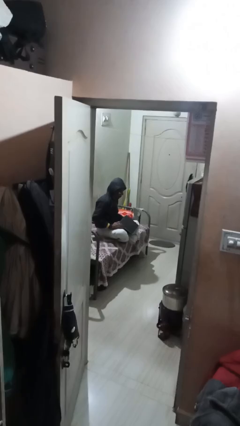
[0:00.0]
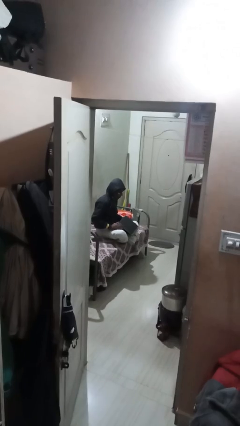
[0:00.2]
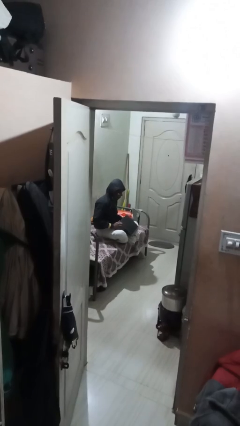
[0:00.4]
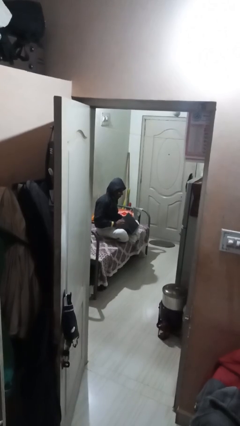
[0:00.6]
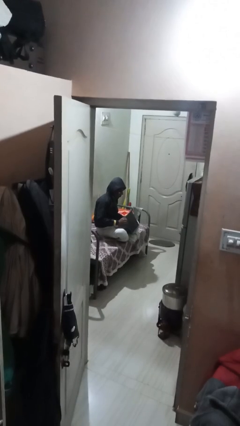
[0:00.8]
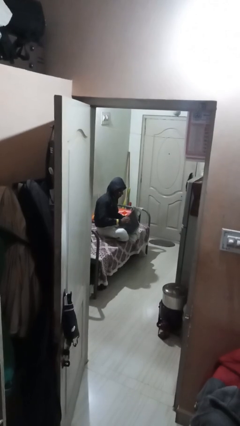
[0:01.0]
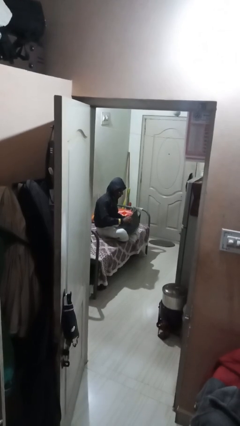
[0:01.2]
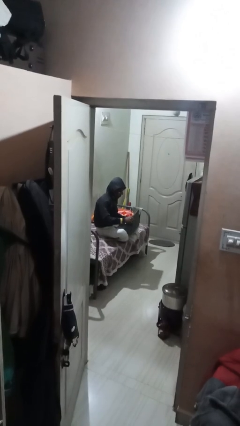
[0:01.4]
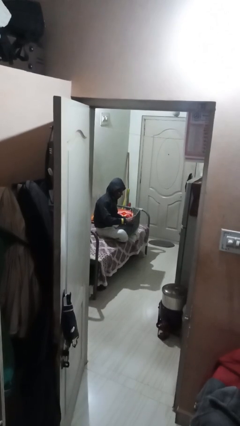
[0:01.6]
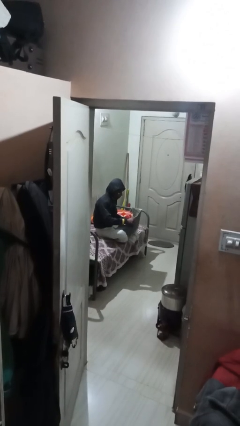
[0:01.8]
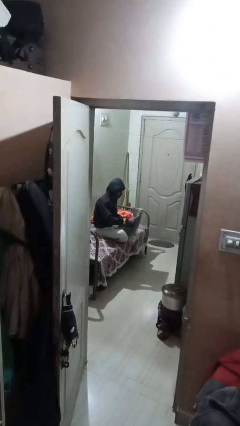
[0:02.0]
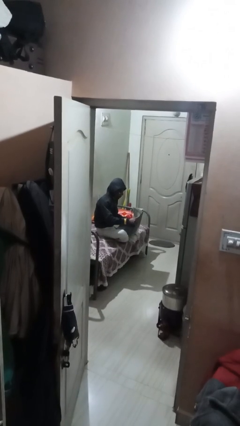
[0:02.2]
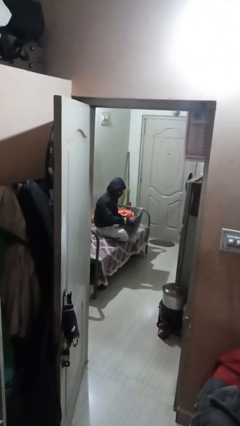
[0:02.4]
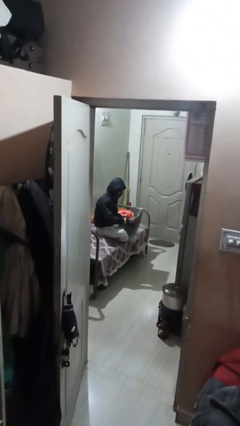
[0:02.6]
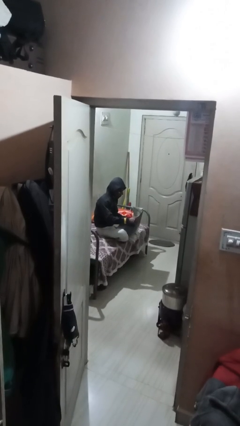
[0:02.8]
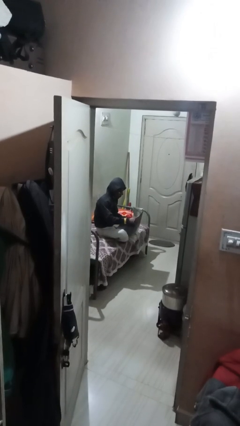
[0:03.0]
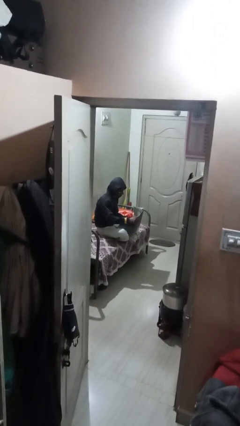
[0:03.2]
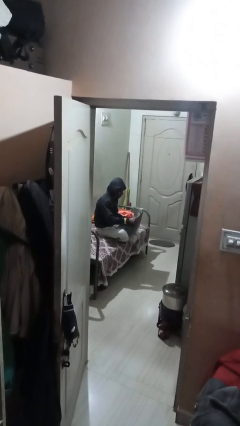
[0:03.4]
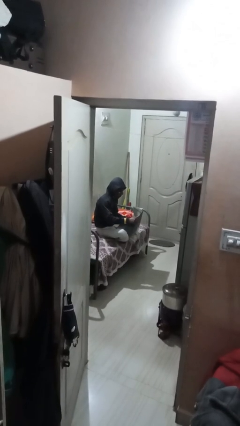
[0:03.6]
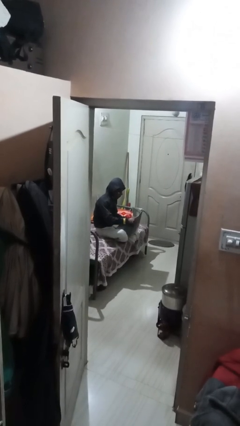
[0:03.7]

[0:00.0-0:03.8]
person interacts with laptop

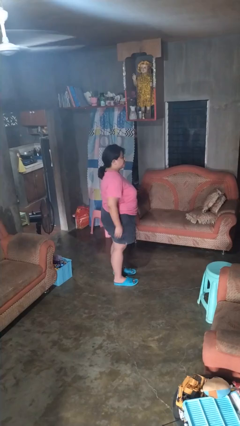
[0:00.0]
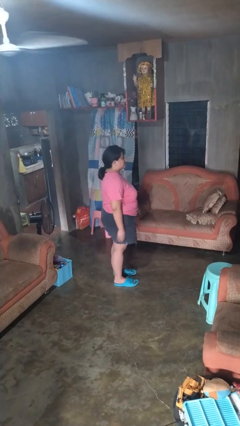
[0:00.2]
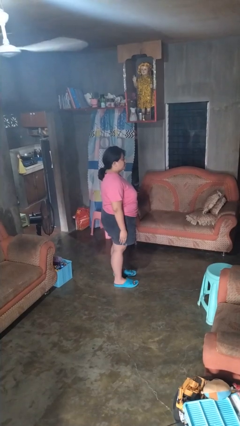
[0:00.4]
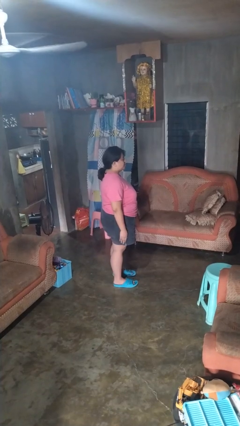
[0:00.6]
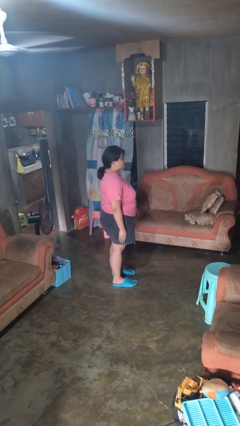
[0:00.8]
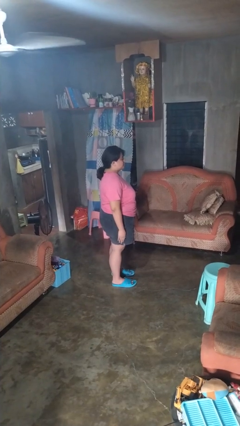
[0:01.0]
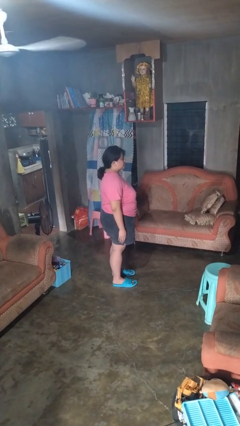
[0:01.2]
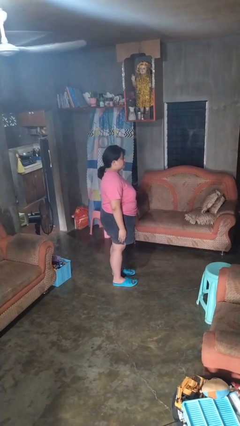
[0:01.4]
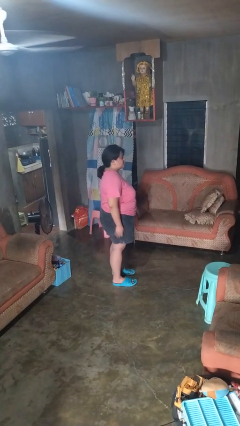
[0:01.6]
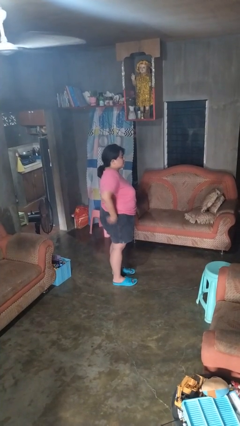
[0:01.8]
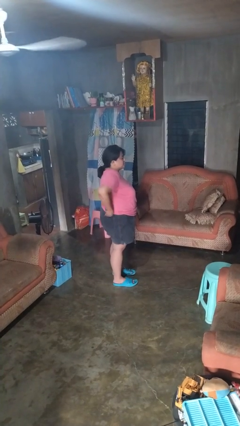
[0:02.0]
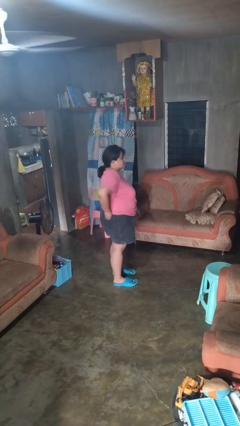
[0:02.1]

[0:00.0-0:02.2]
person puts hands in back pockets

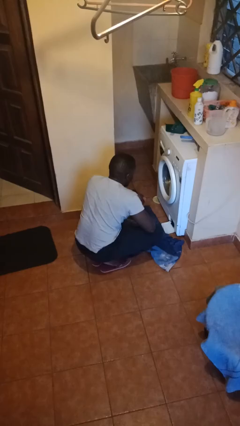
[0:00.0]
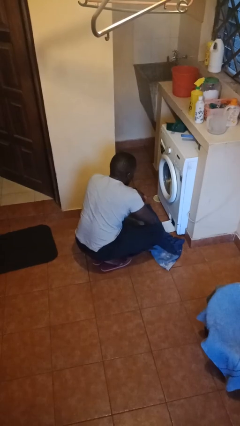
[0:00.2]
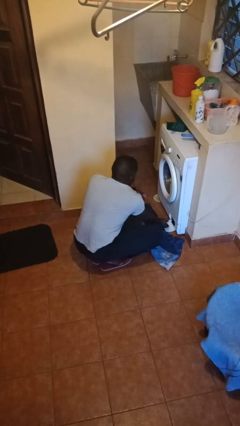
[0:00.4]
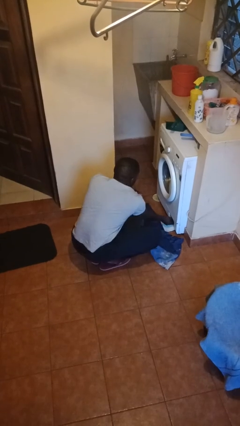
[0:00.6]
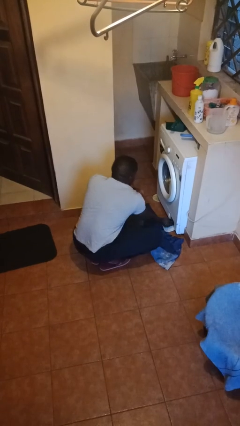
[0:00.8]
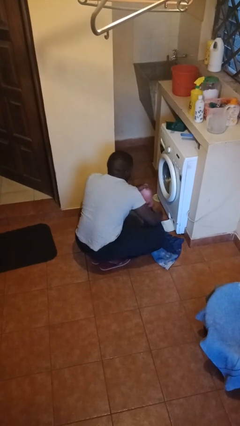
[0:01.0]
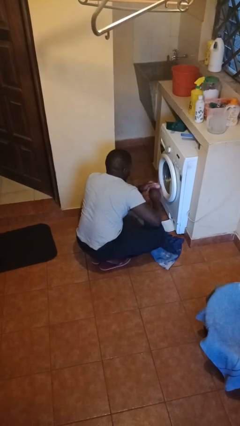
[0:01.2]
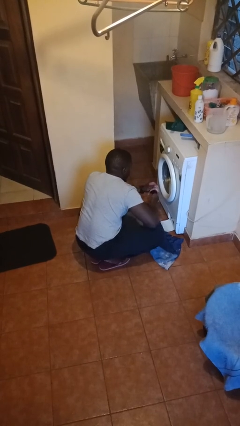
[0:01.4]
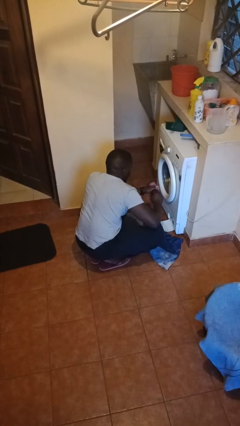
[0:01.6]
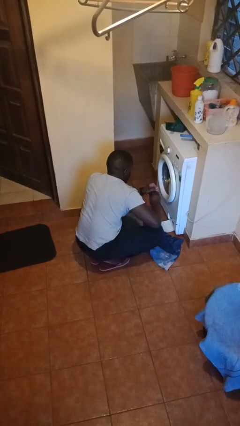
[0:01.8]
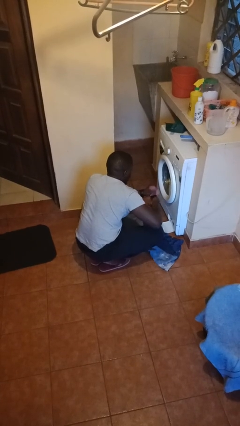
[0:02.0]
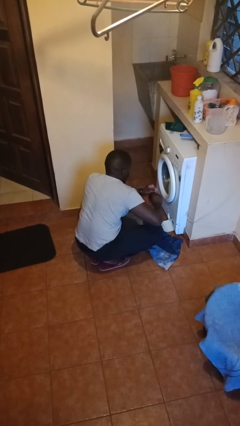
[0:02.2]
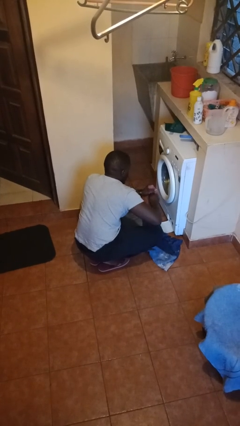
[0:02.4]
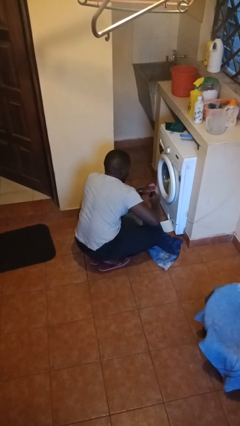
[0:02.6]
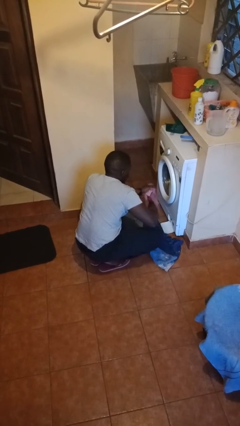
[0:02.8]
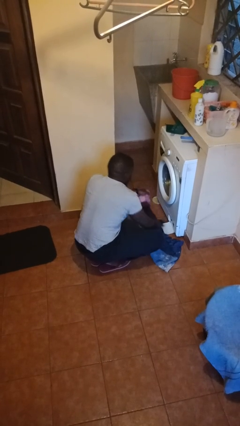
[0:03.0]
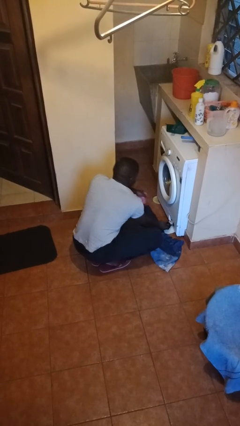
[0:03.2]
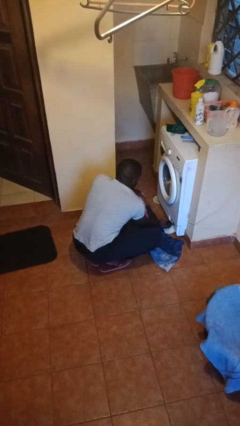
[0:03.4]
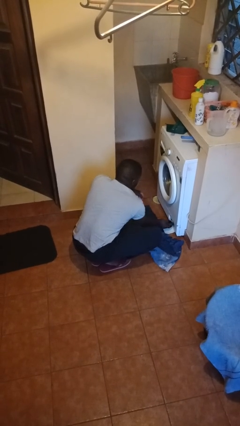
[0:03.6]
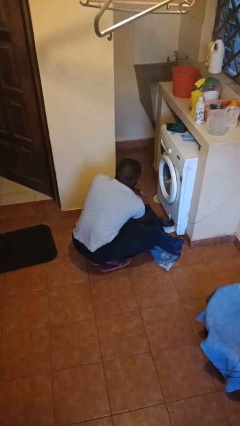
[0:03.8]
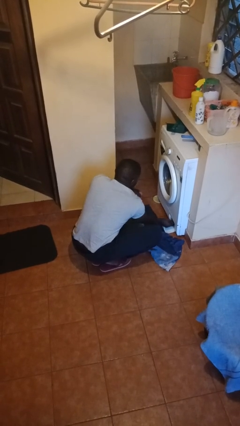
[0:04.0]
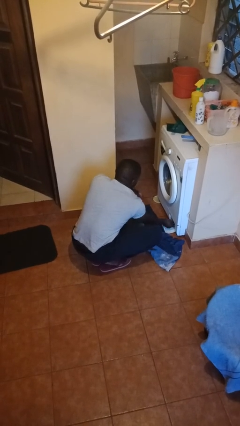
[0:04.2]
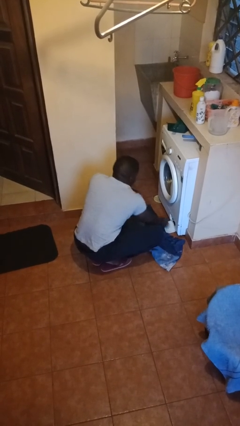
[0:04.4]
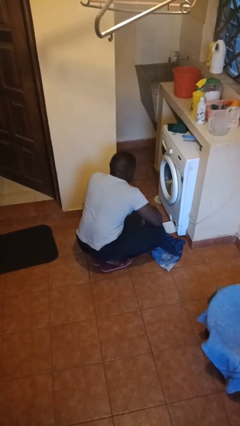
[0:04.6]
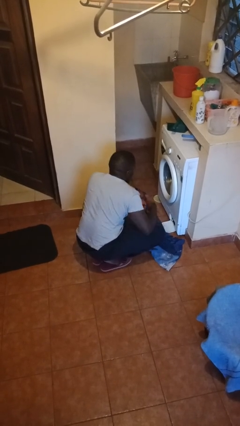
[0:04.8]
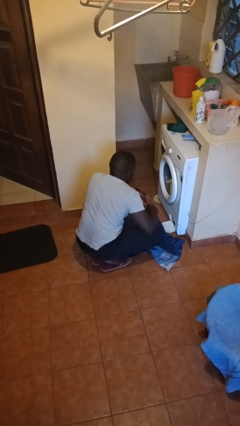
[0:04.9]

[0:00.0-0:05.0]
person cleans dryer lint trap

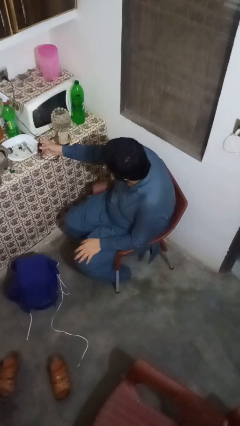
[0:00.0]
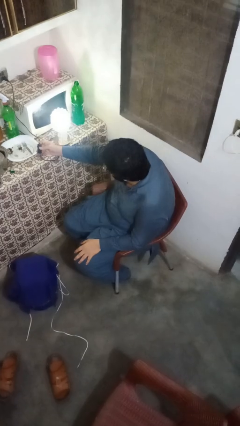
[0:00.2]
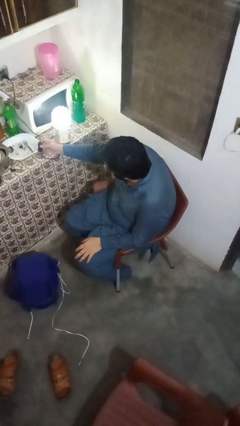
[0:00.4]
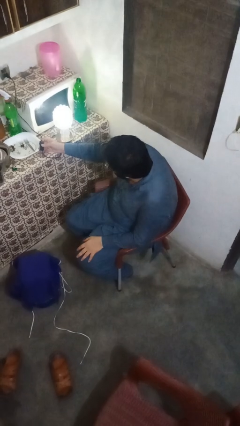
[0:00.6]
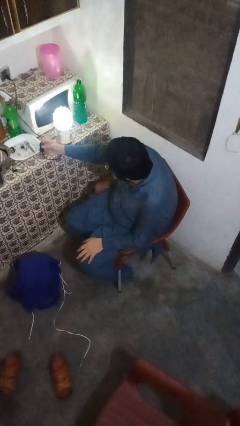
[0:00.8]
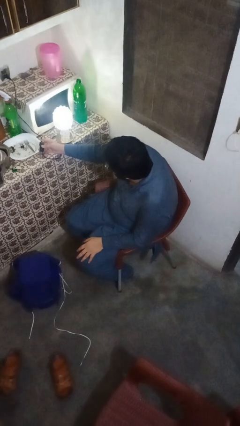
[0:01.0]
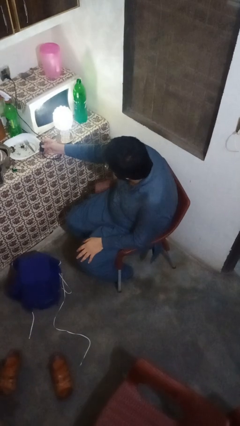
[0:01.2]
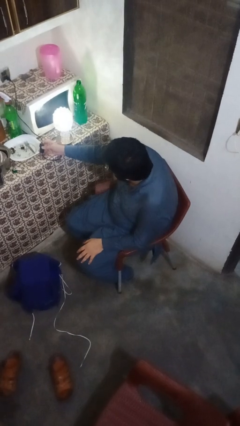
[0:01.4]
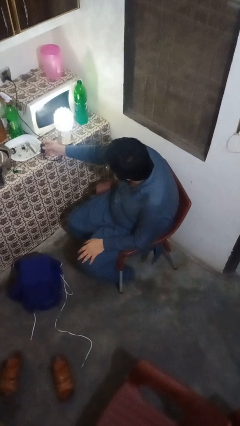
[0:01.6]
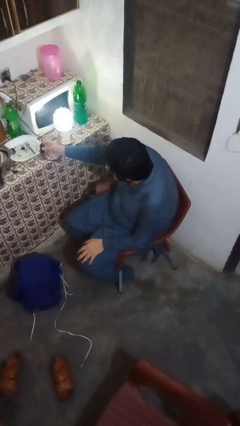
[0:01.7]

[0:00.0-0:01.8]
person turns on lamp

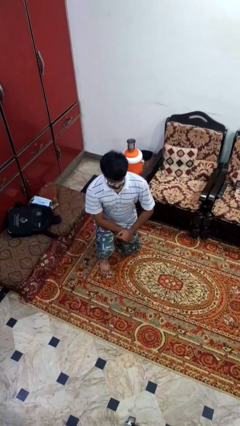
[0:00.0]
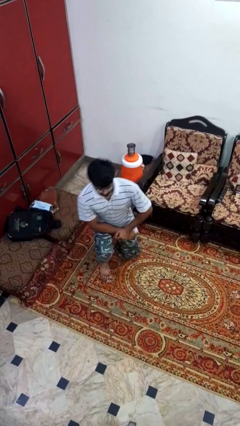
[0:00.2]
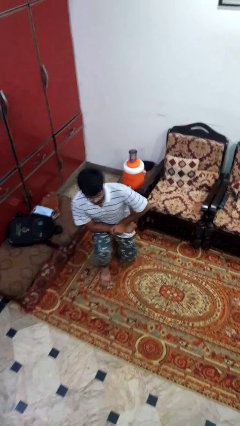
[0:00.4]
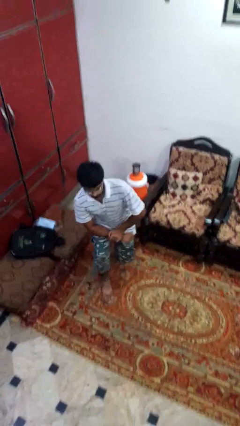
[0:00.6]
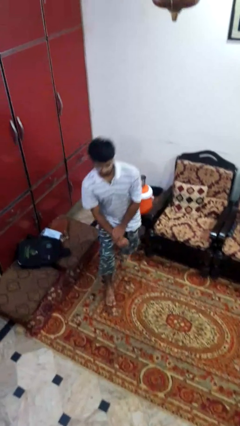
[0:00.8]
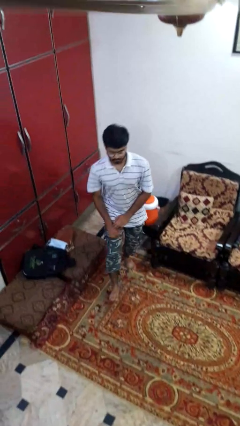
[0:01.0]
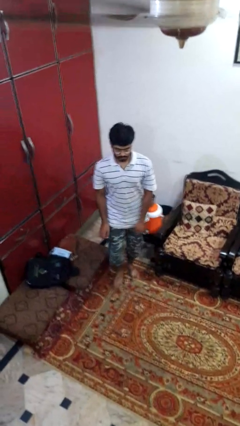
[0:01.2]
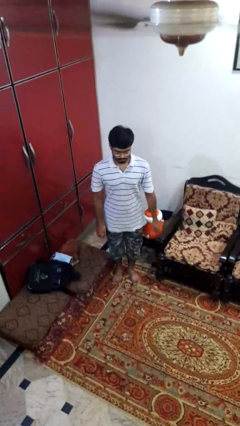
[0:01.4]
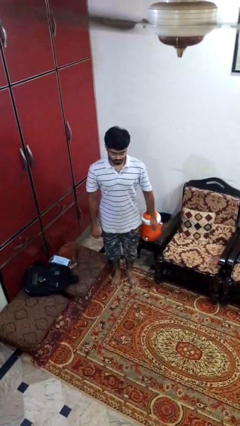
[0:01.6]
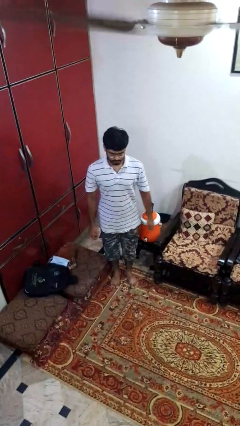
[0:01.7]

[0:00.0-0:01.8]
person stands up from floor

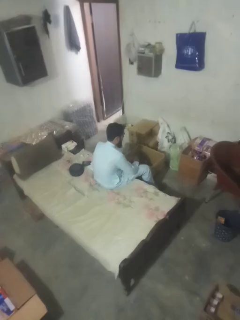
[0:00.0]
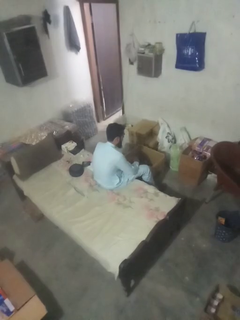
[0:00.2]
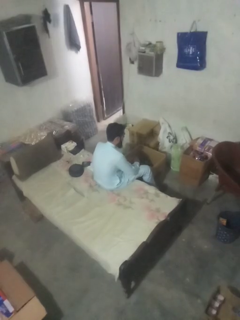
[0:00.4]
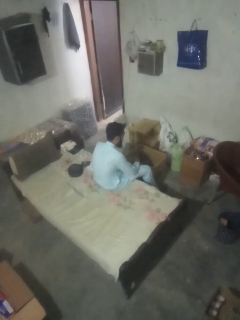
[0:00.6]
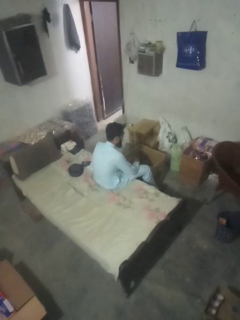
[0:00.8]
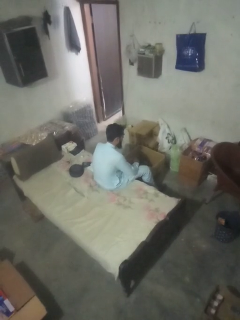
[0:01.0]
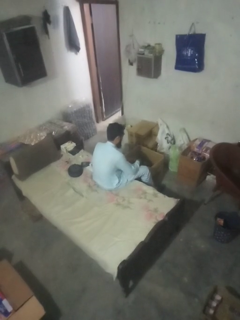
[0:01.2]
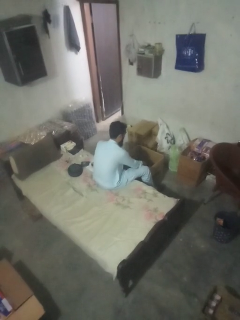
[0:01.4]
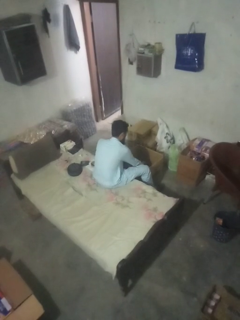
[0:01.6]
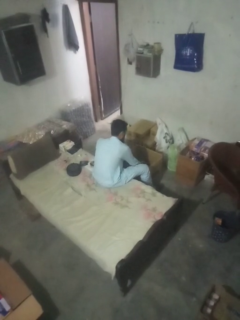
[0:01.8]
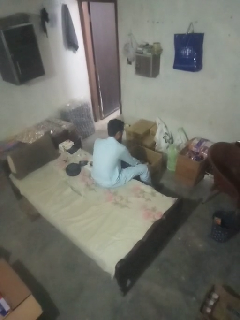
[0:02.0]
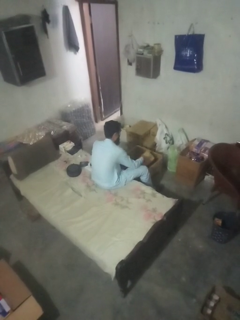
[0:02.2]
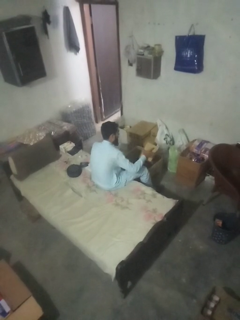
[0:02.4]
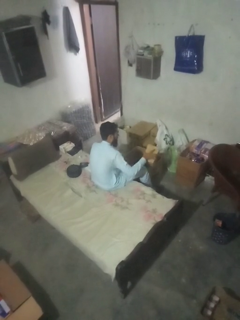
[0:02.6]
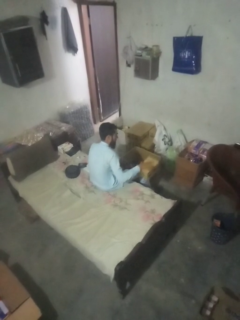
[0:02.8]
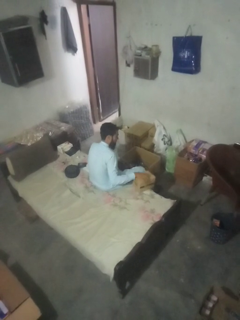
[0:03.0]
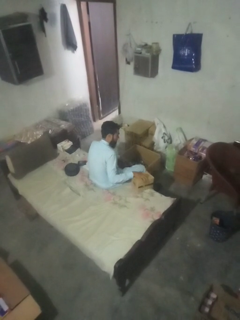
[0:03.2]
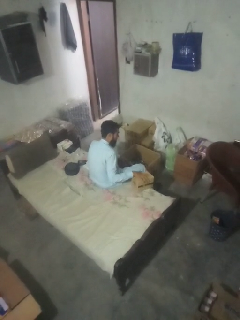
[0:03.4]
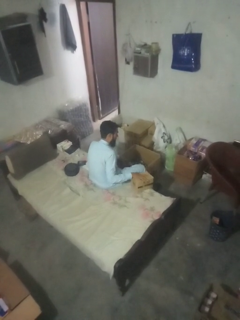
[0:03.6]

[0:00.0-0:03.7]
person takes object from box

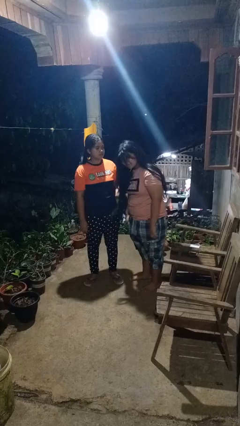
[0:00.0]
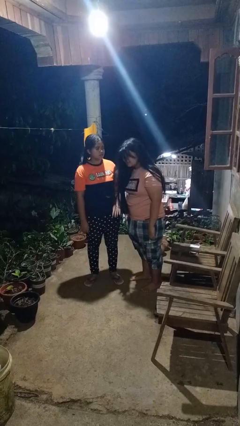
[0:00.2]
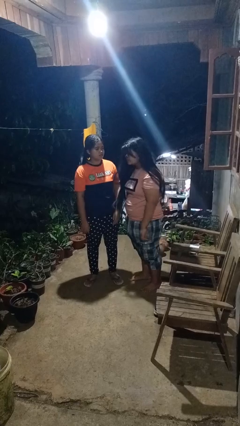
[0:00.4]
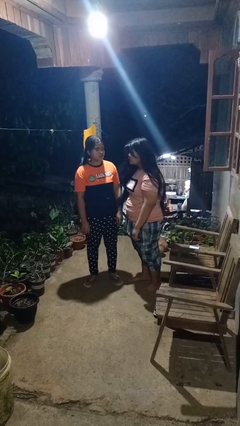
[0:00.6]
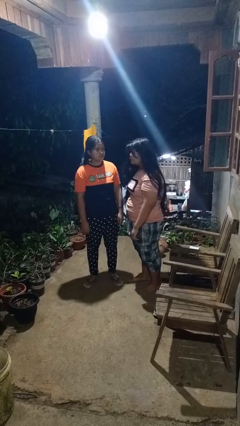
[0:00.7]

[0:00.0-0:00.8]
person grabs person by hair
